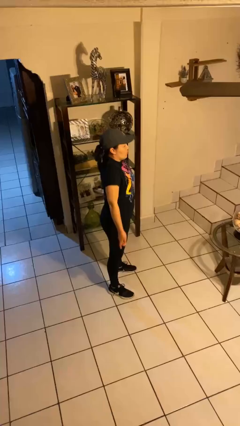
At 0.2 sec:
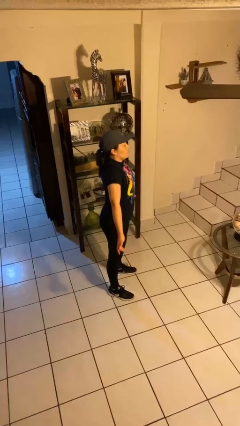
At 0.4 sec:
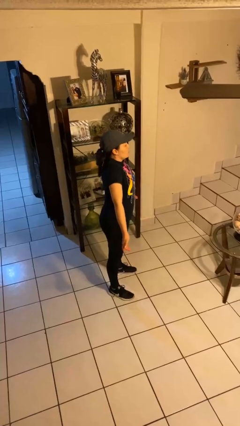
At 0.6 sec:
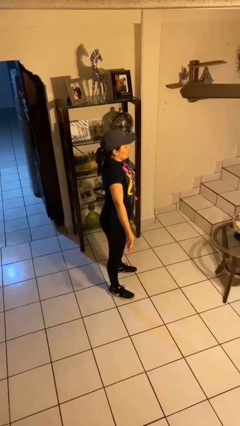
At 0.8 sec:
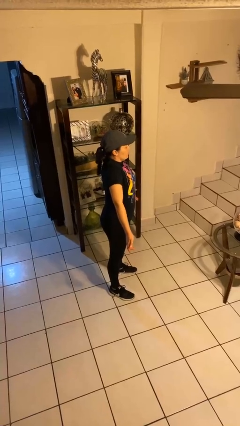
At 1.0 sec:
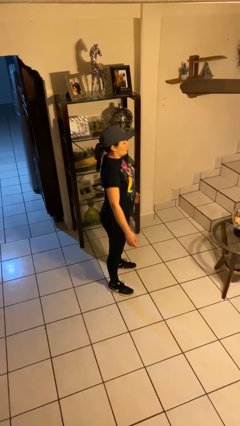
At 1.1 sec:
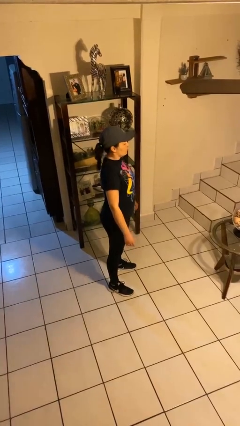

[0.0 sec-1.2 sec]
person shrugs

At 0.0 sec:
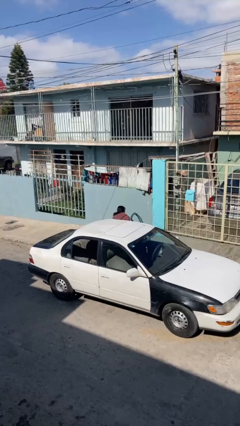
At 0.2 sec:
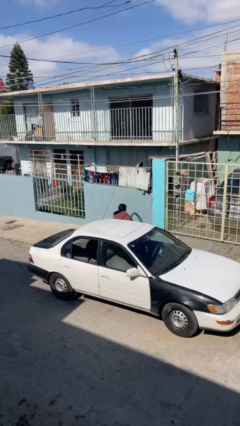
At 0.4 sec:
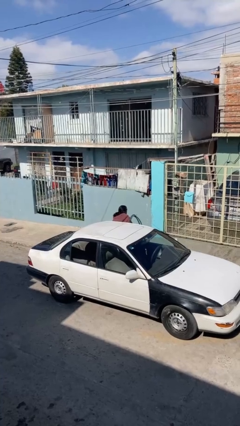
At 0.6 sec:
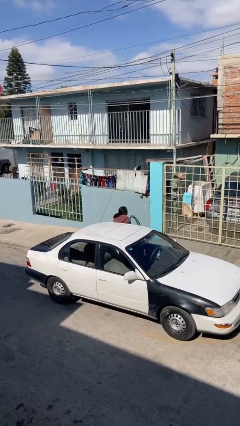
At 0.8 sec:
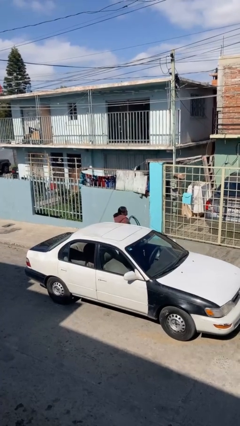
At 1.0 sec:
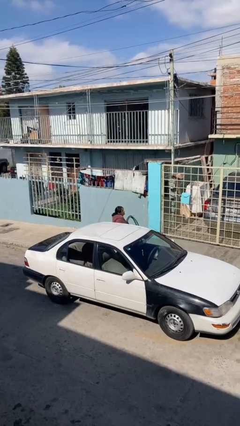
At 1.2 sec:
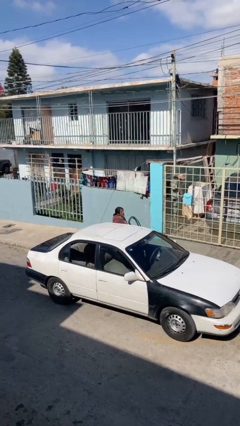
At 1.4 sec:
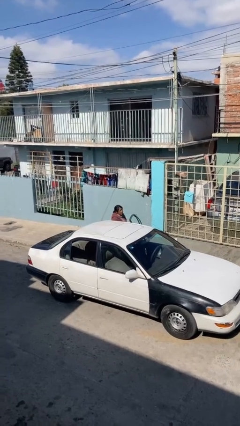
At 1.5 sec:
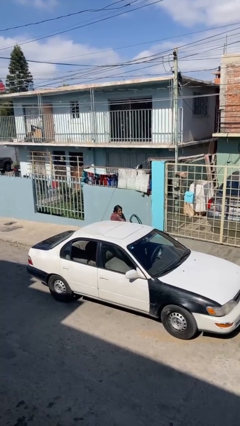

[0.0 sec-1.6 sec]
person exits car

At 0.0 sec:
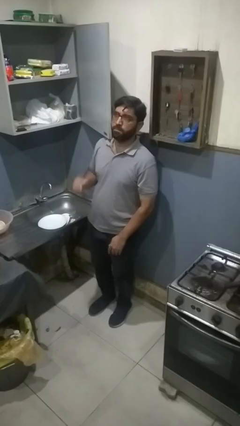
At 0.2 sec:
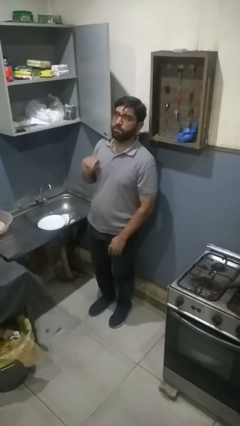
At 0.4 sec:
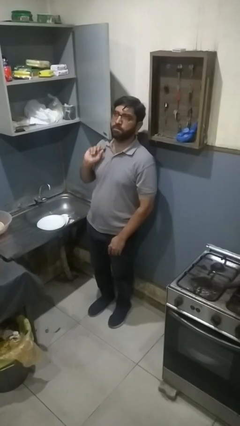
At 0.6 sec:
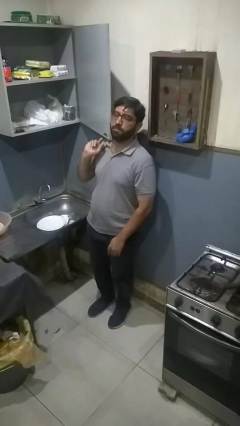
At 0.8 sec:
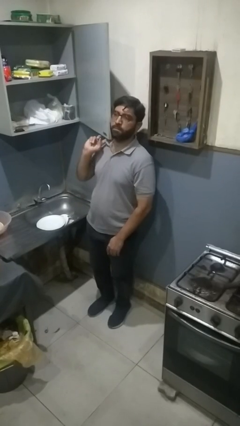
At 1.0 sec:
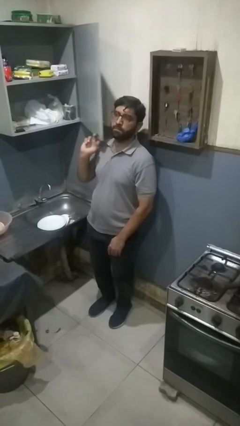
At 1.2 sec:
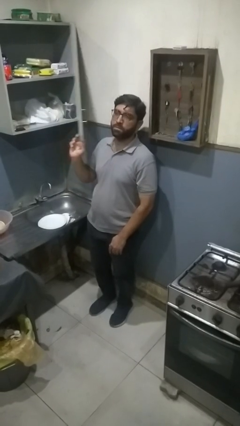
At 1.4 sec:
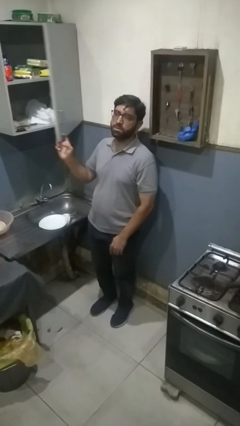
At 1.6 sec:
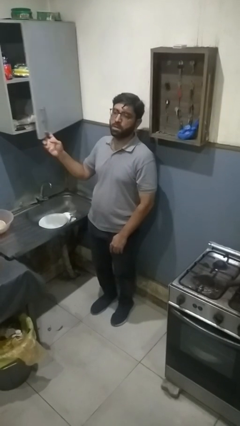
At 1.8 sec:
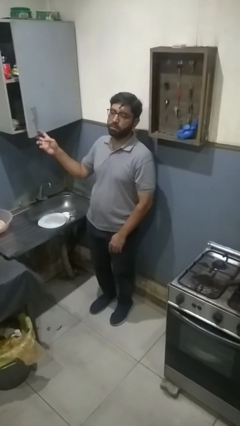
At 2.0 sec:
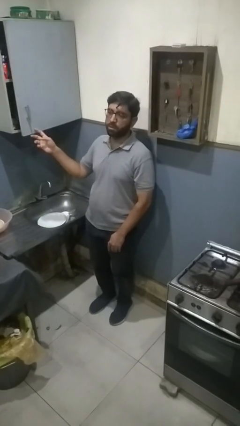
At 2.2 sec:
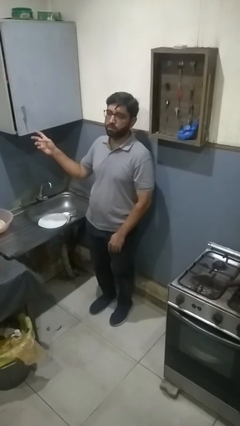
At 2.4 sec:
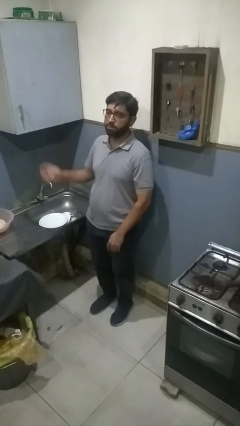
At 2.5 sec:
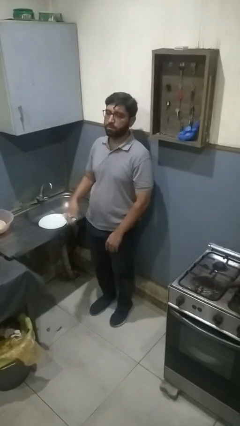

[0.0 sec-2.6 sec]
person closes cabinet

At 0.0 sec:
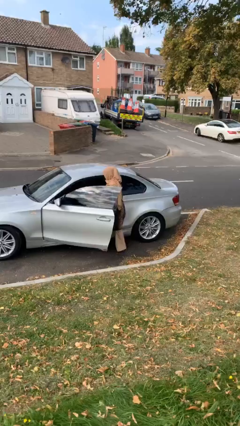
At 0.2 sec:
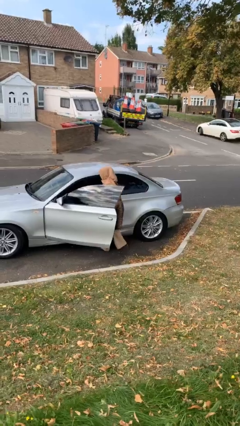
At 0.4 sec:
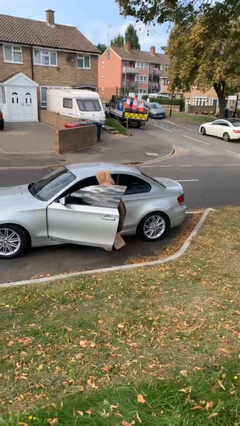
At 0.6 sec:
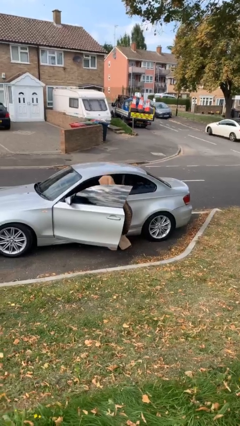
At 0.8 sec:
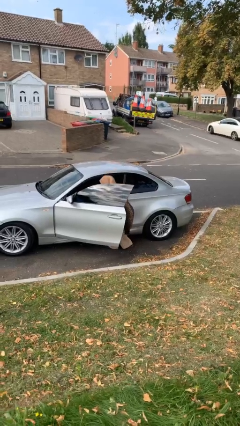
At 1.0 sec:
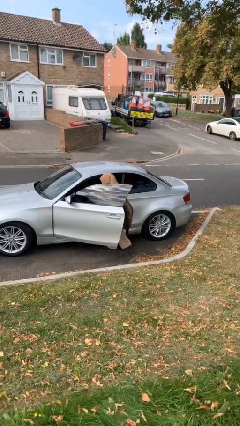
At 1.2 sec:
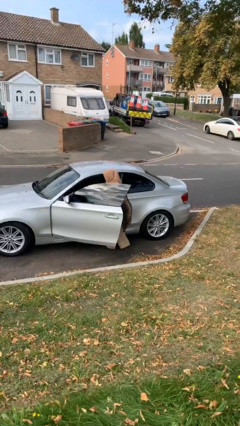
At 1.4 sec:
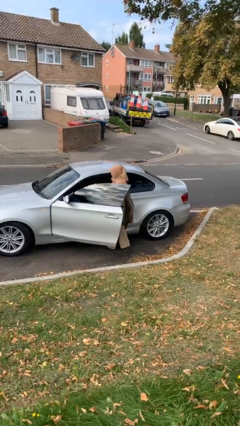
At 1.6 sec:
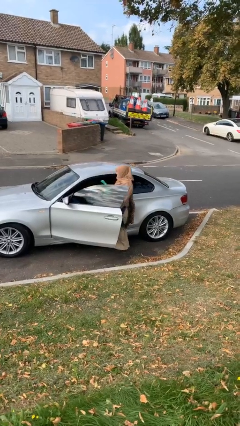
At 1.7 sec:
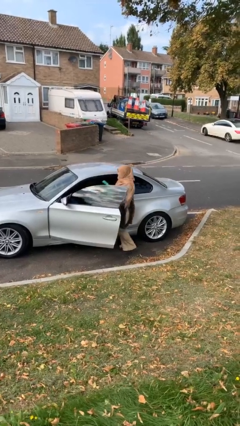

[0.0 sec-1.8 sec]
person unloads car

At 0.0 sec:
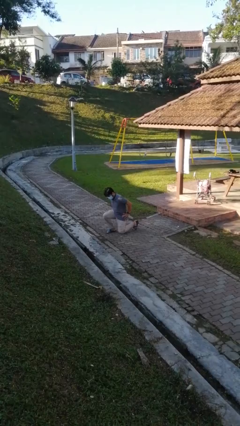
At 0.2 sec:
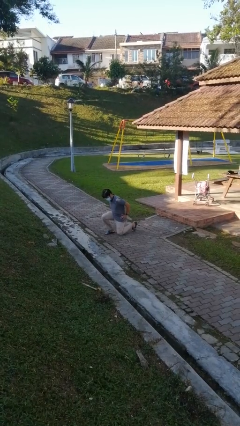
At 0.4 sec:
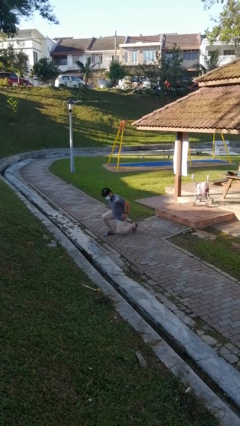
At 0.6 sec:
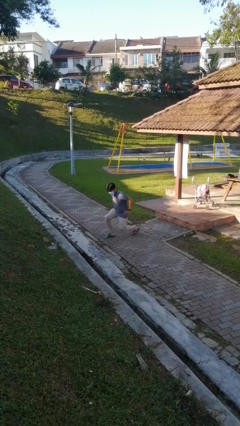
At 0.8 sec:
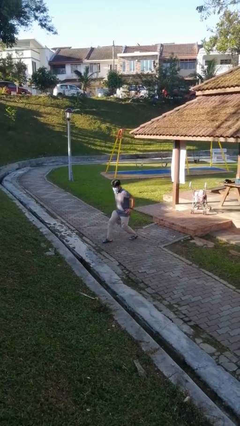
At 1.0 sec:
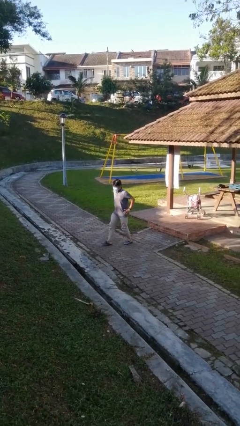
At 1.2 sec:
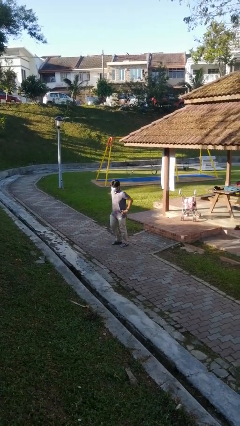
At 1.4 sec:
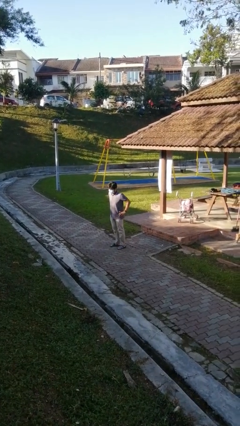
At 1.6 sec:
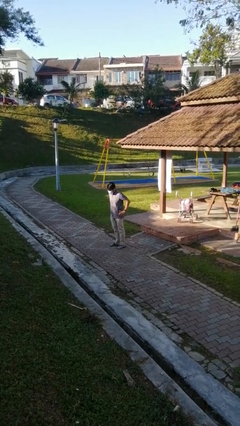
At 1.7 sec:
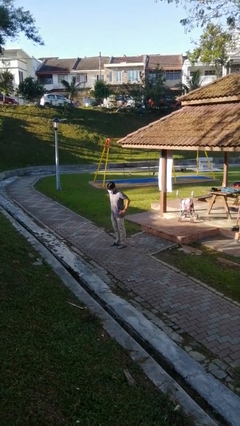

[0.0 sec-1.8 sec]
person stands up from floor

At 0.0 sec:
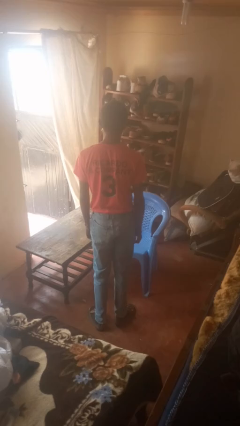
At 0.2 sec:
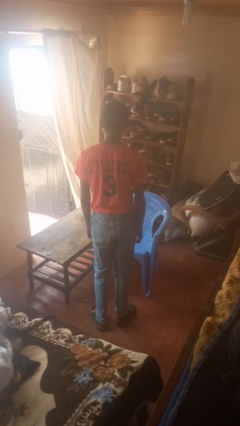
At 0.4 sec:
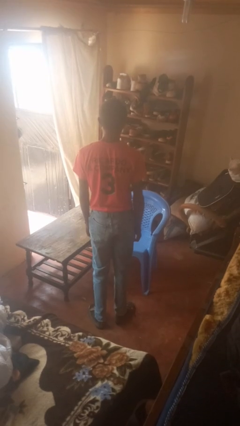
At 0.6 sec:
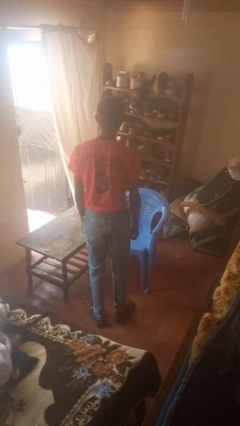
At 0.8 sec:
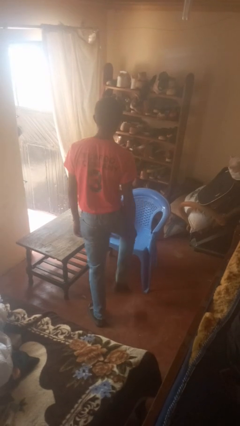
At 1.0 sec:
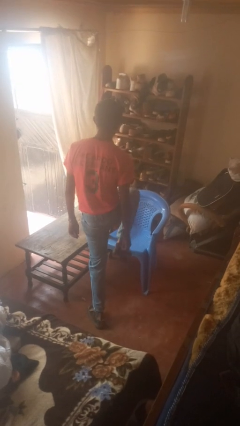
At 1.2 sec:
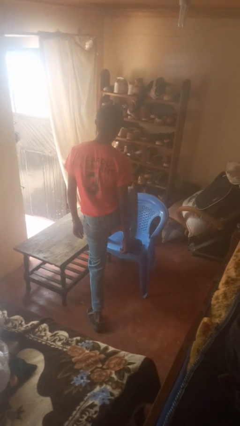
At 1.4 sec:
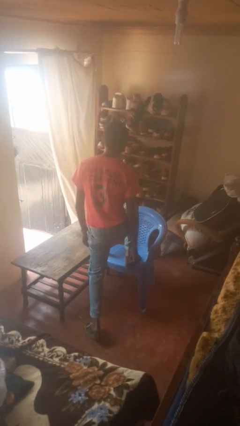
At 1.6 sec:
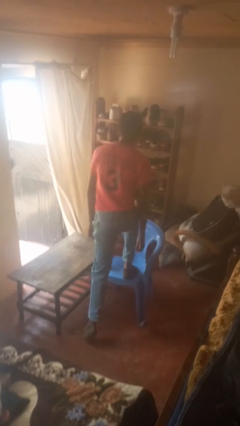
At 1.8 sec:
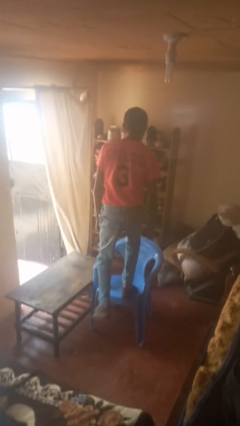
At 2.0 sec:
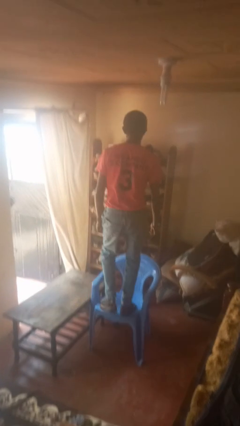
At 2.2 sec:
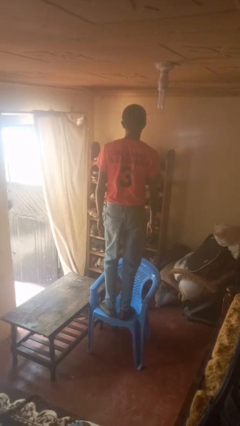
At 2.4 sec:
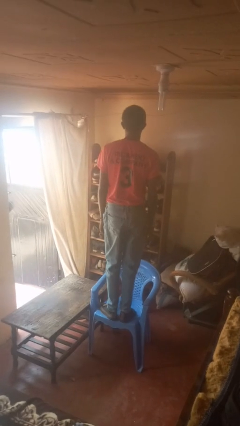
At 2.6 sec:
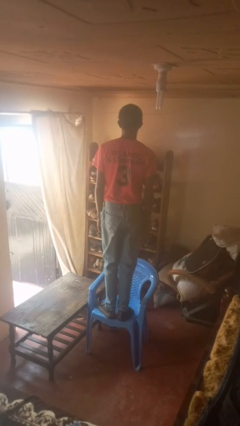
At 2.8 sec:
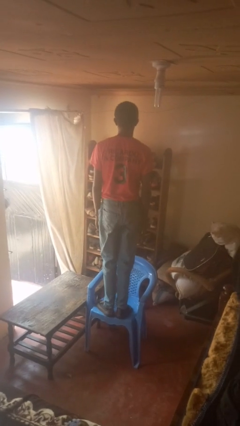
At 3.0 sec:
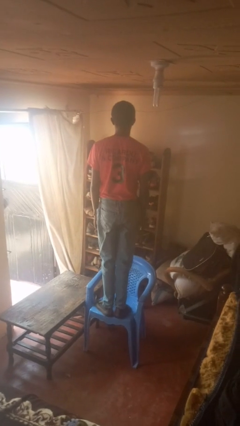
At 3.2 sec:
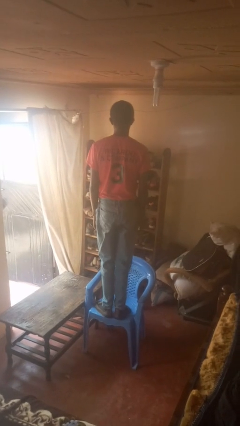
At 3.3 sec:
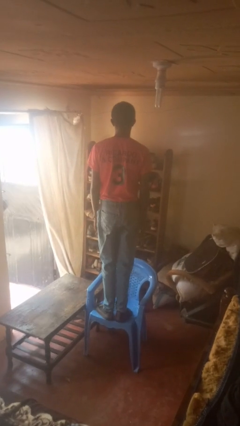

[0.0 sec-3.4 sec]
person climbs on chair

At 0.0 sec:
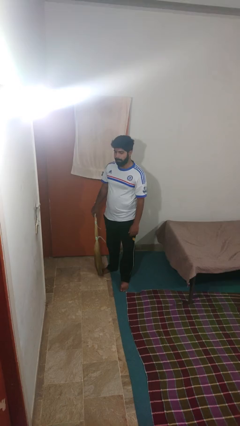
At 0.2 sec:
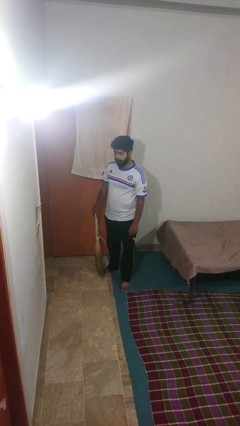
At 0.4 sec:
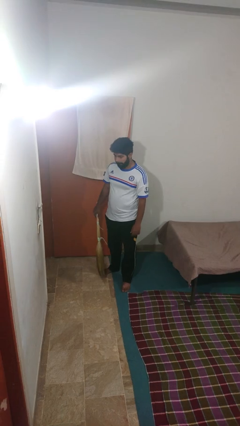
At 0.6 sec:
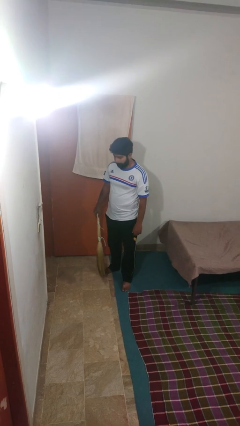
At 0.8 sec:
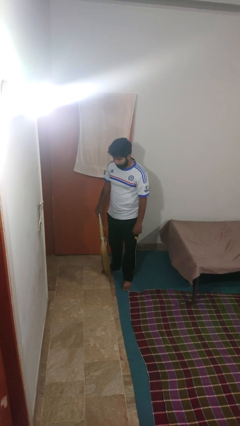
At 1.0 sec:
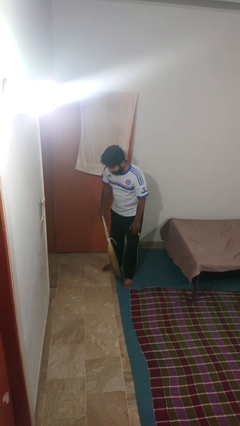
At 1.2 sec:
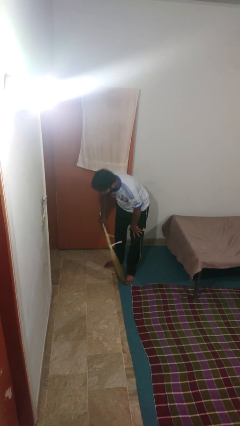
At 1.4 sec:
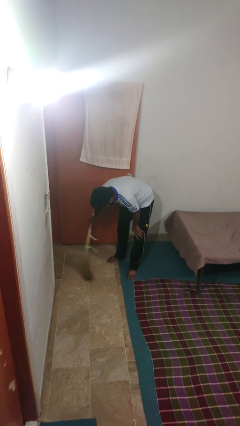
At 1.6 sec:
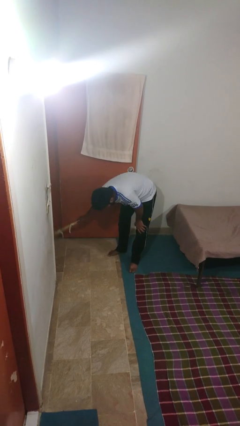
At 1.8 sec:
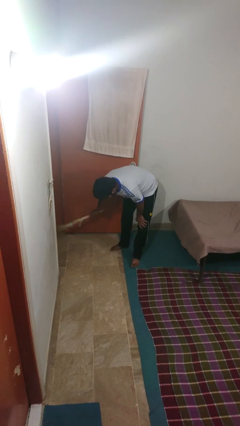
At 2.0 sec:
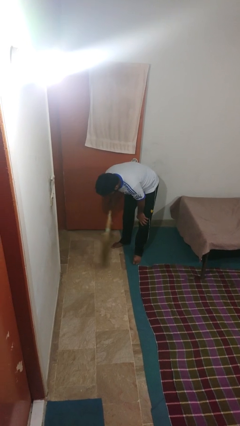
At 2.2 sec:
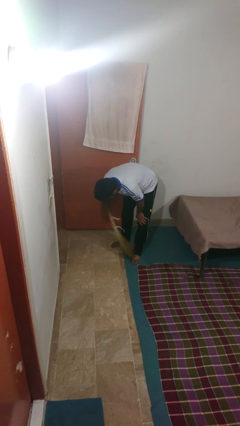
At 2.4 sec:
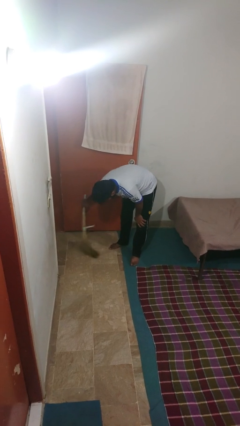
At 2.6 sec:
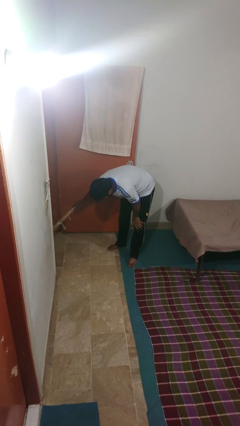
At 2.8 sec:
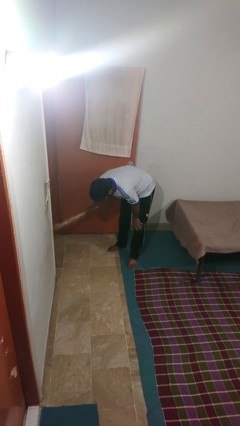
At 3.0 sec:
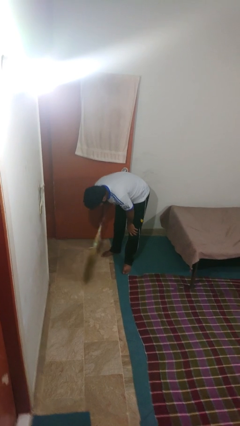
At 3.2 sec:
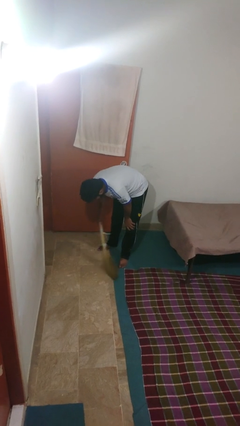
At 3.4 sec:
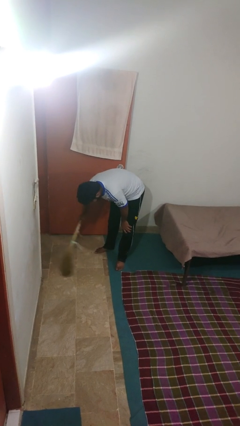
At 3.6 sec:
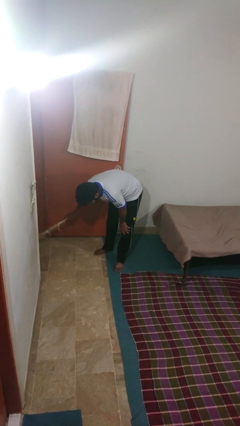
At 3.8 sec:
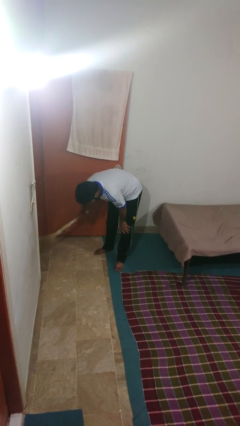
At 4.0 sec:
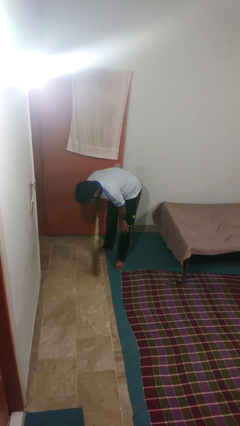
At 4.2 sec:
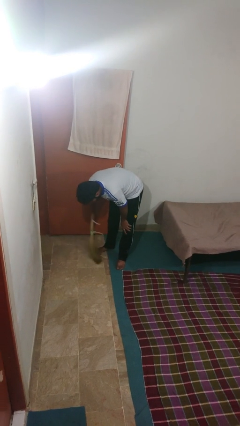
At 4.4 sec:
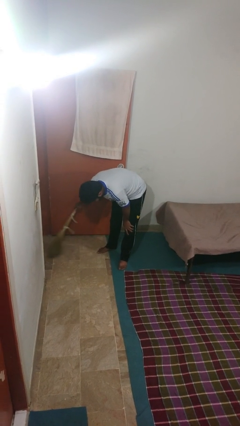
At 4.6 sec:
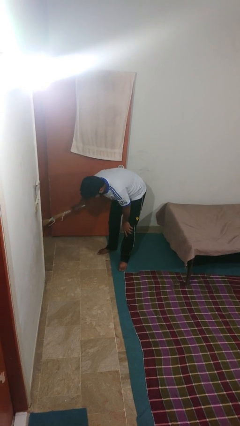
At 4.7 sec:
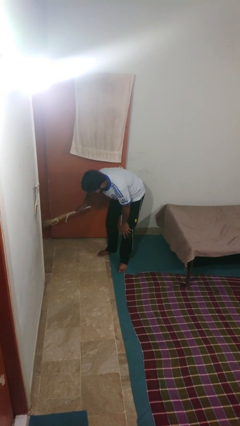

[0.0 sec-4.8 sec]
person sweeps floor
